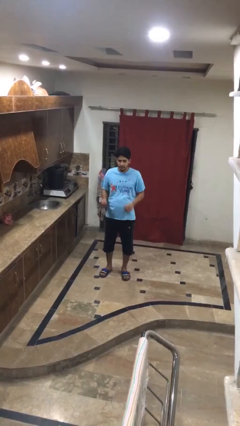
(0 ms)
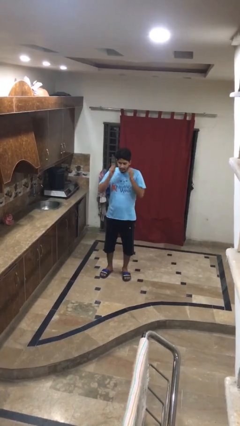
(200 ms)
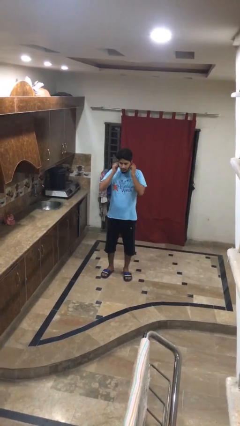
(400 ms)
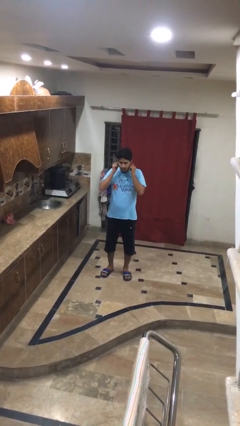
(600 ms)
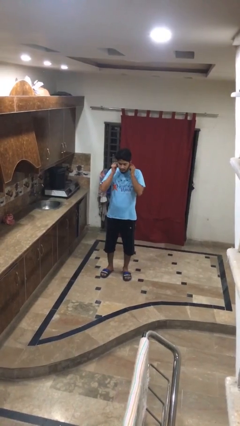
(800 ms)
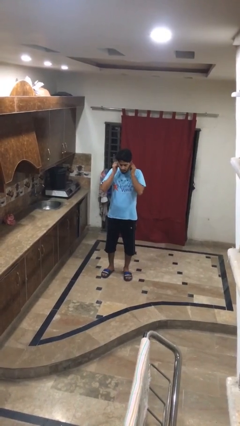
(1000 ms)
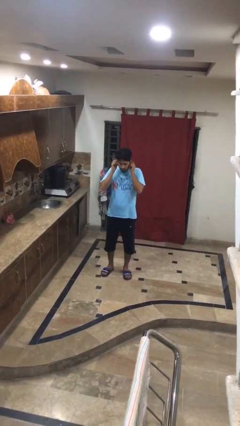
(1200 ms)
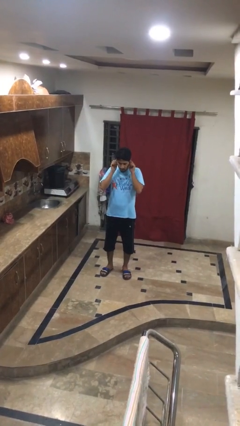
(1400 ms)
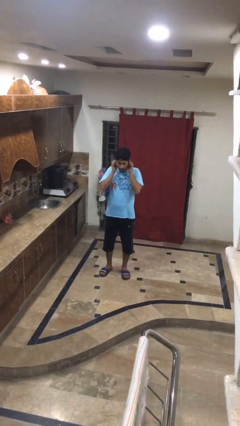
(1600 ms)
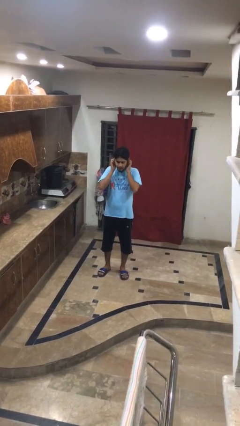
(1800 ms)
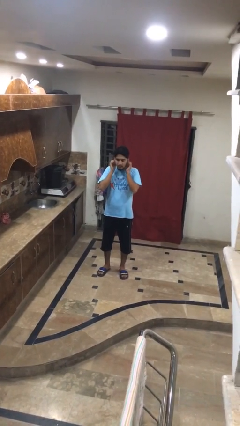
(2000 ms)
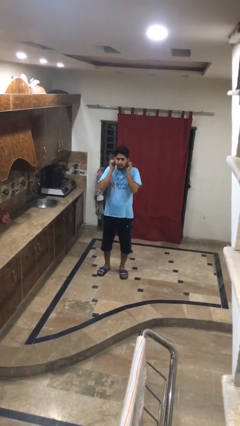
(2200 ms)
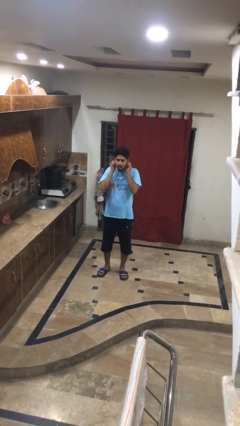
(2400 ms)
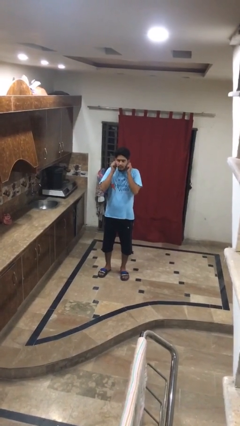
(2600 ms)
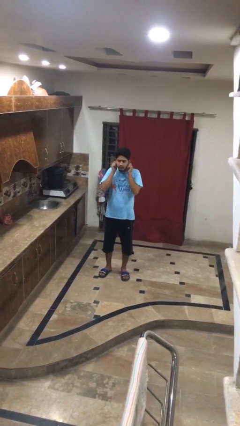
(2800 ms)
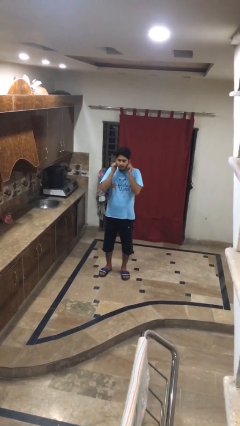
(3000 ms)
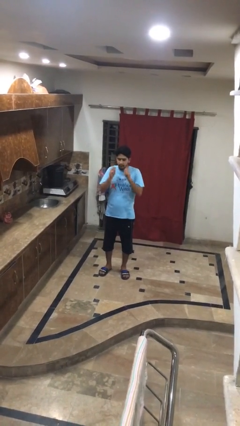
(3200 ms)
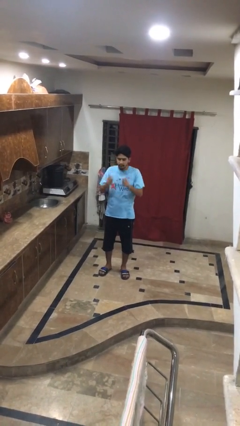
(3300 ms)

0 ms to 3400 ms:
person touches earlobe

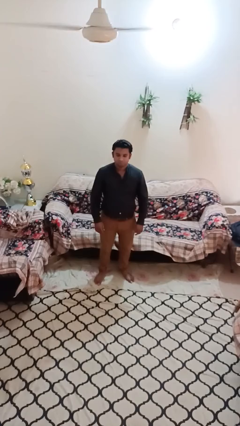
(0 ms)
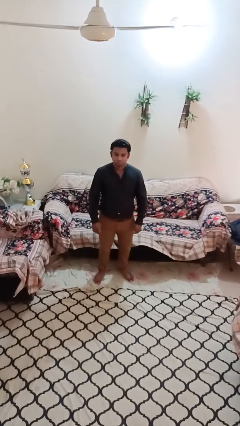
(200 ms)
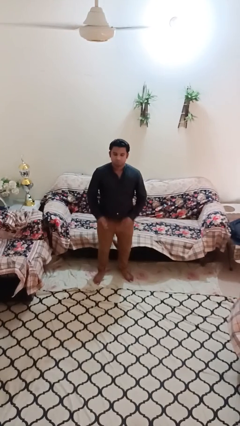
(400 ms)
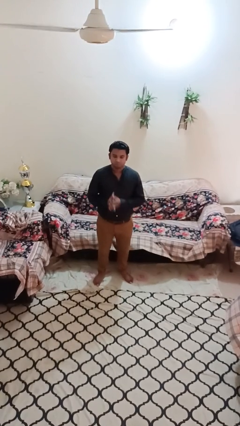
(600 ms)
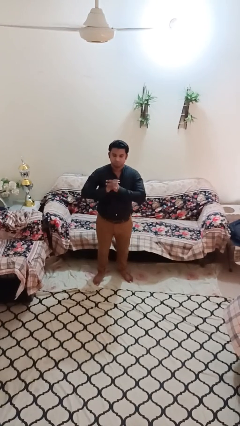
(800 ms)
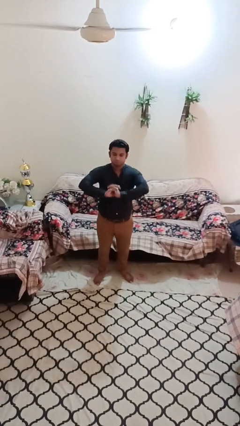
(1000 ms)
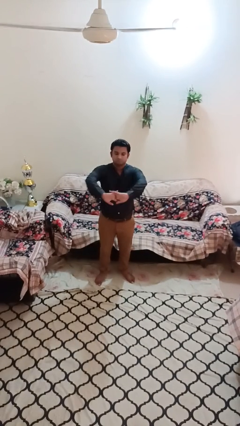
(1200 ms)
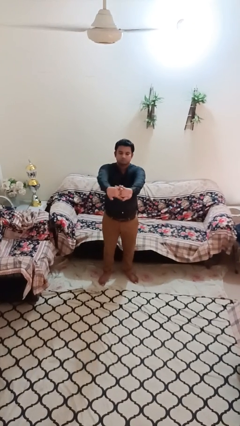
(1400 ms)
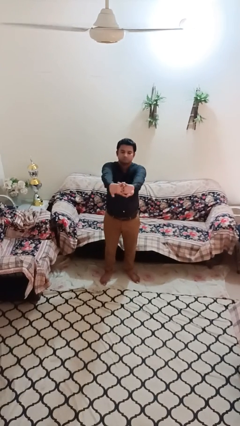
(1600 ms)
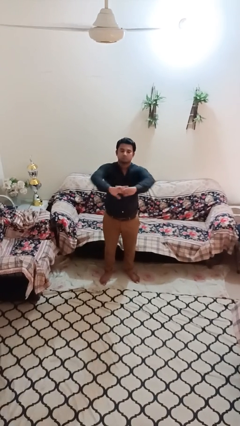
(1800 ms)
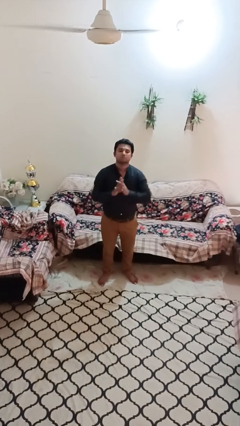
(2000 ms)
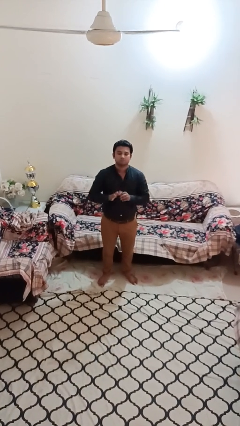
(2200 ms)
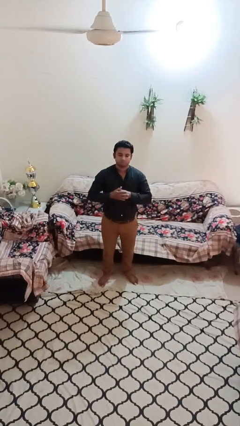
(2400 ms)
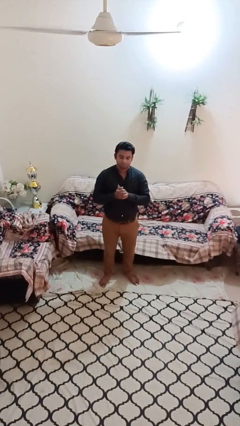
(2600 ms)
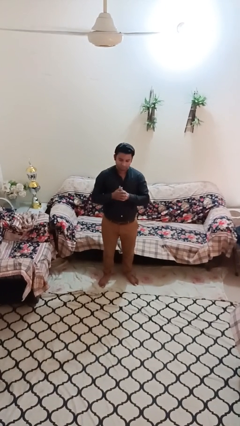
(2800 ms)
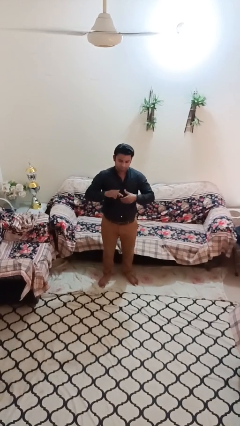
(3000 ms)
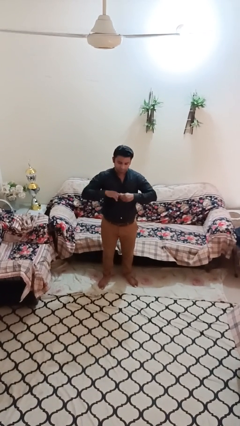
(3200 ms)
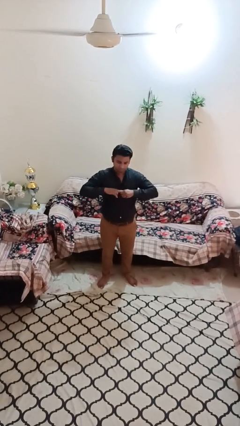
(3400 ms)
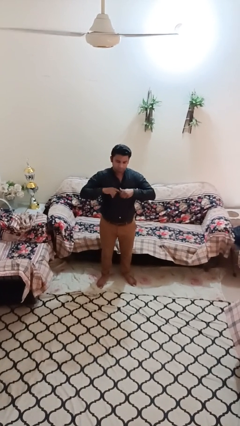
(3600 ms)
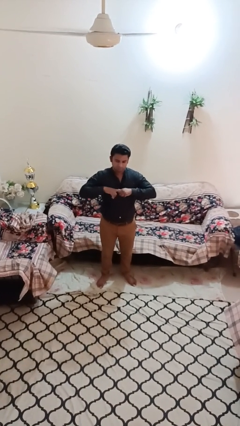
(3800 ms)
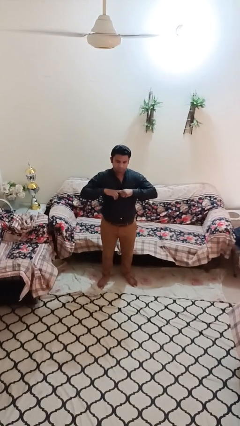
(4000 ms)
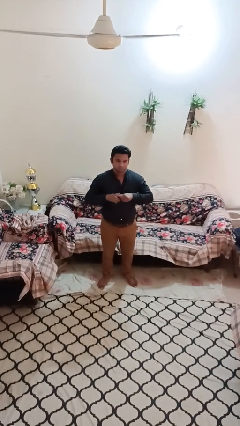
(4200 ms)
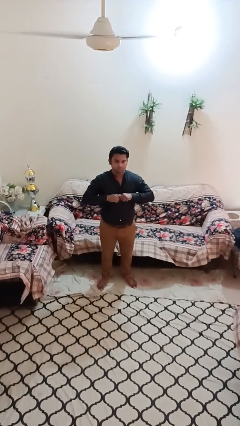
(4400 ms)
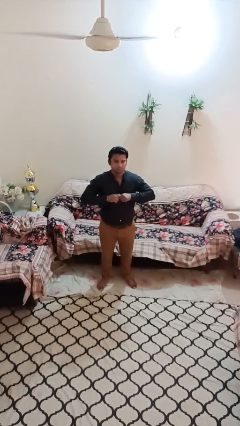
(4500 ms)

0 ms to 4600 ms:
person cracks knuckles

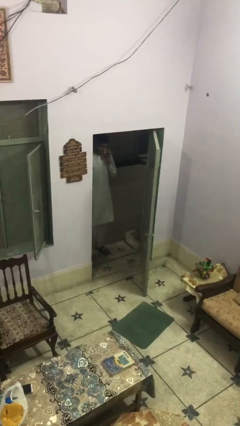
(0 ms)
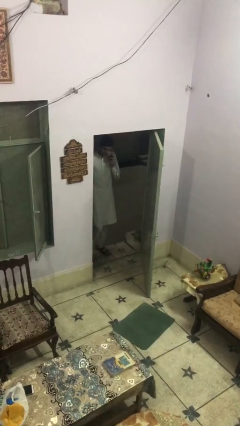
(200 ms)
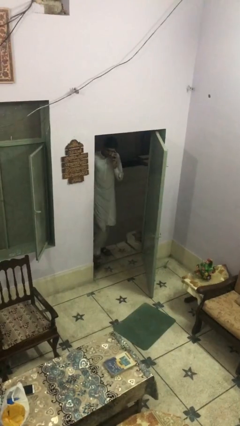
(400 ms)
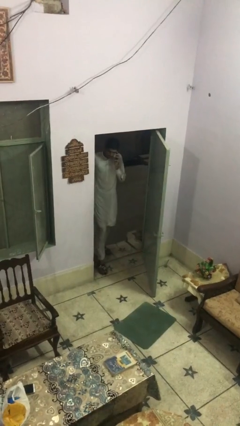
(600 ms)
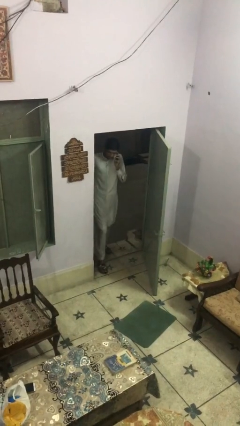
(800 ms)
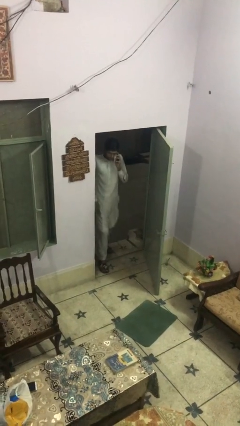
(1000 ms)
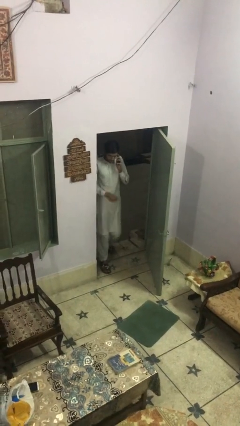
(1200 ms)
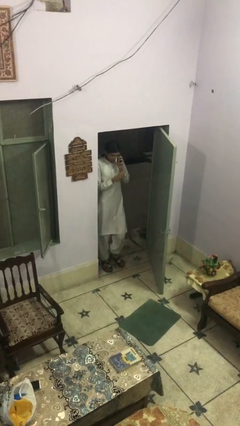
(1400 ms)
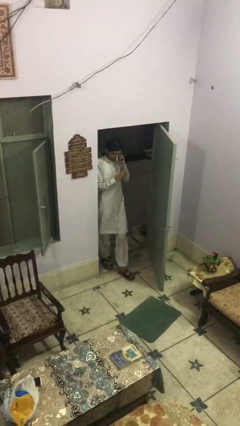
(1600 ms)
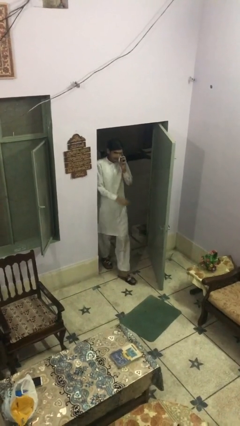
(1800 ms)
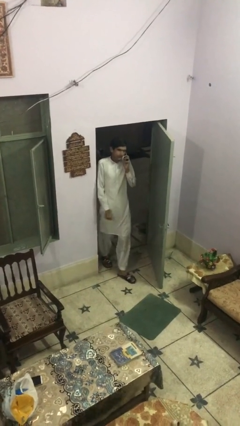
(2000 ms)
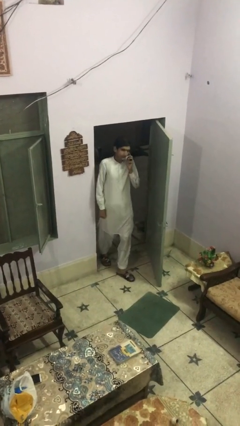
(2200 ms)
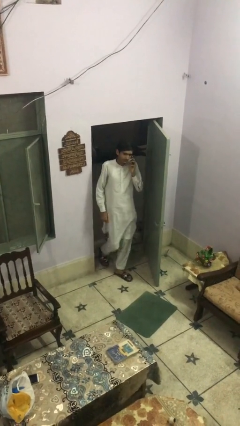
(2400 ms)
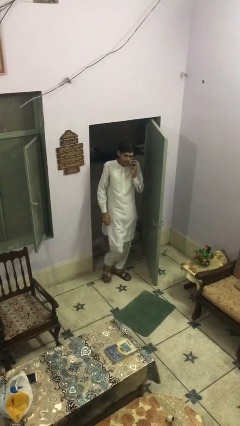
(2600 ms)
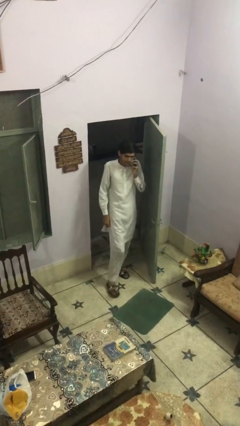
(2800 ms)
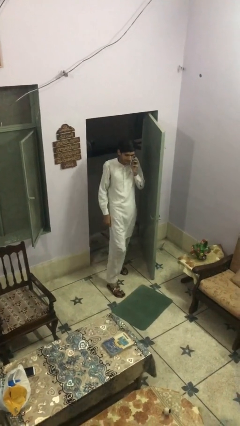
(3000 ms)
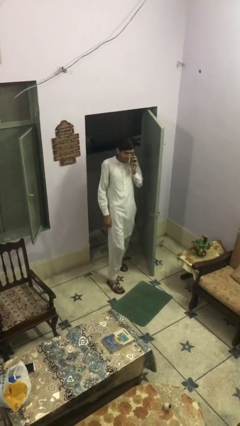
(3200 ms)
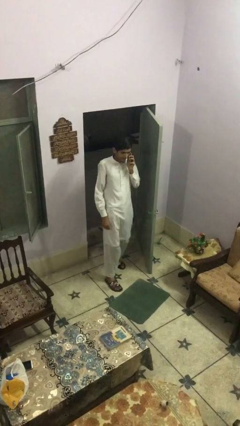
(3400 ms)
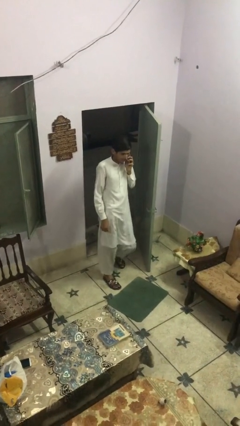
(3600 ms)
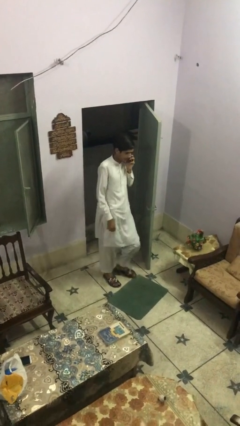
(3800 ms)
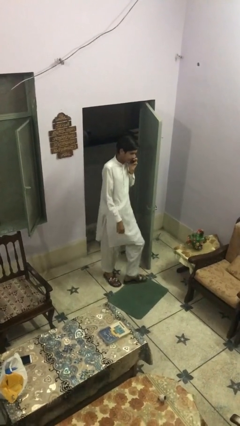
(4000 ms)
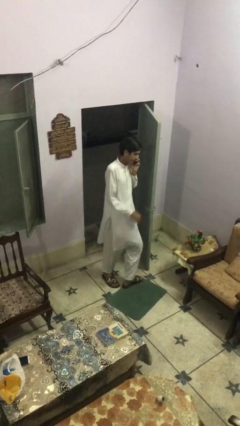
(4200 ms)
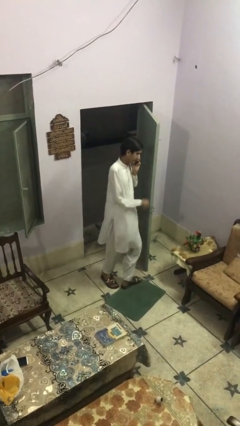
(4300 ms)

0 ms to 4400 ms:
person enters scene through structure

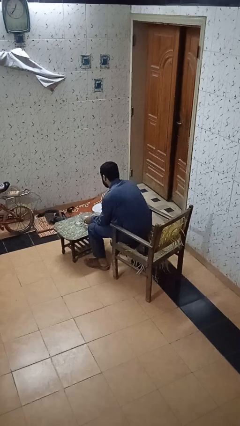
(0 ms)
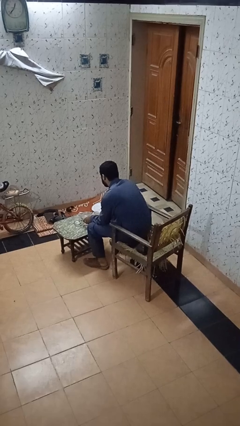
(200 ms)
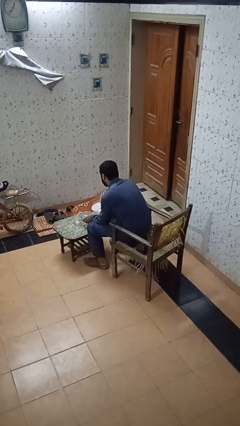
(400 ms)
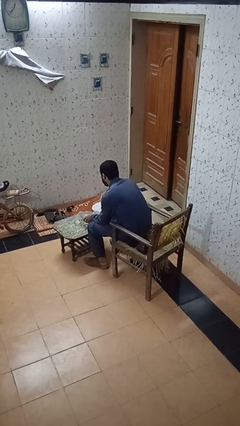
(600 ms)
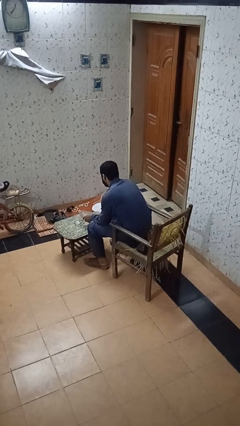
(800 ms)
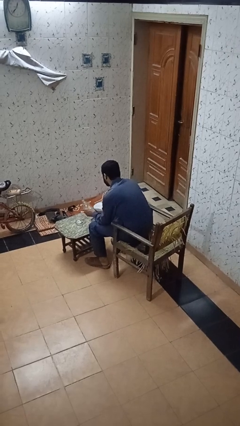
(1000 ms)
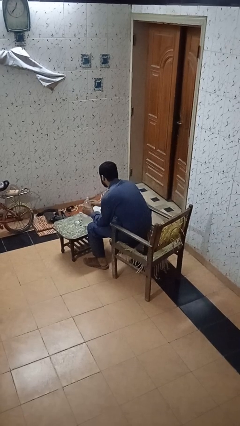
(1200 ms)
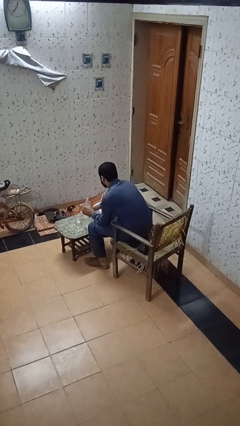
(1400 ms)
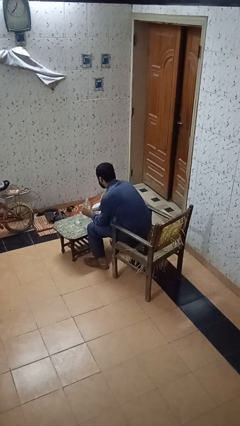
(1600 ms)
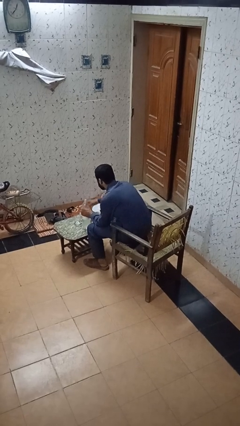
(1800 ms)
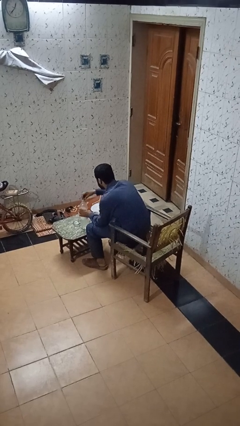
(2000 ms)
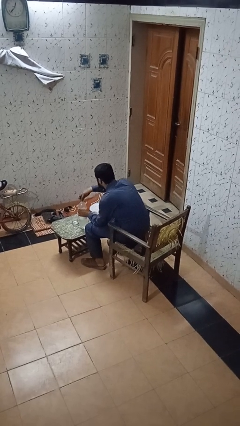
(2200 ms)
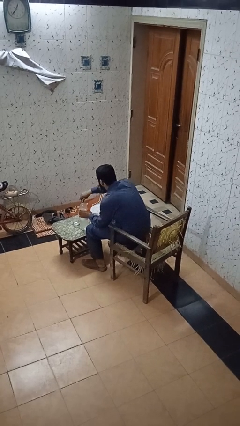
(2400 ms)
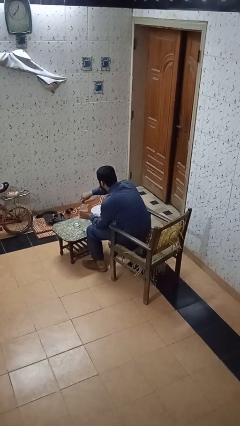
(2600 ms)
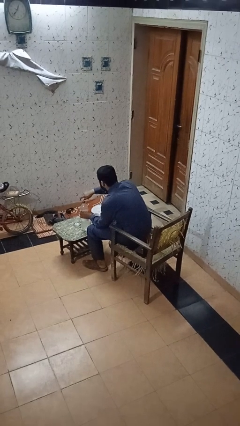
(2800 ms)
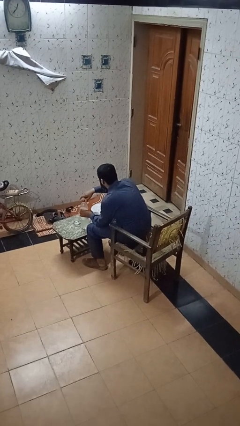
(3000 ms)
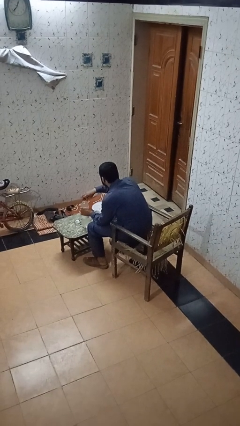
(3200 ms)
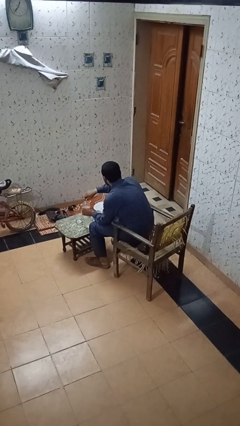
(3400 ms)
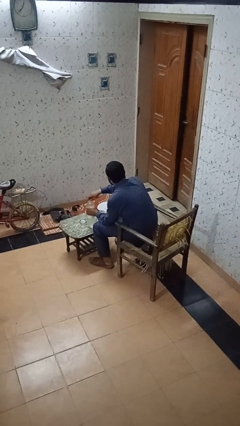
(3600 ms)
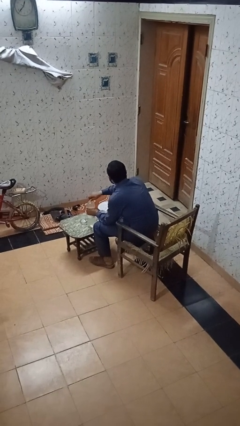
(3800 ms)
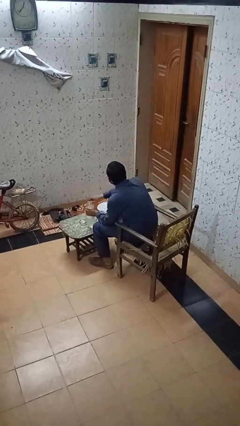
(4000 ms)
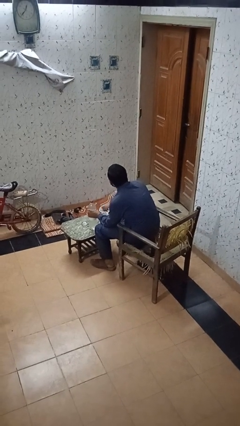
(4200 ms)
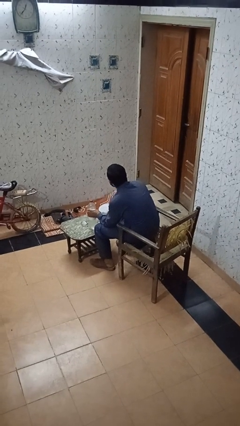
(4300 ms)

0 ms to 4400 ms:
person screws lid to bottle

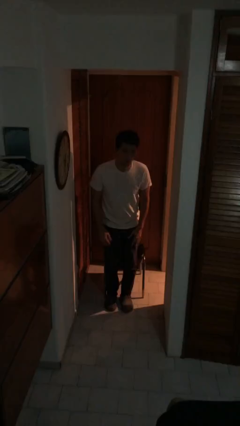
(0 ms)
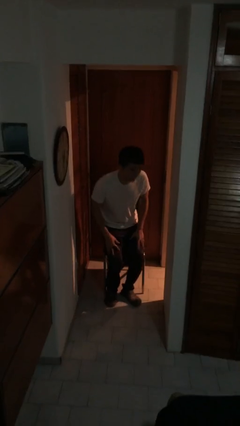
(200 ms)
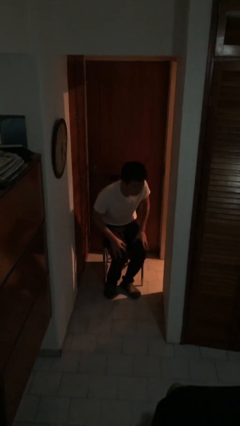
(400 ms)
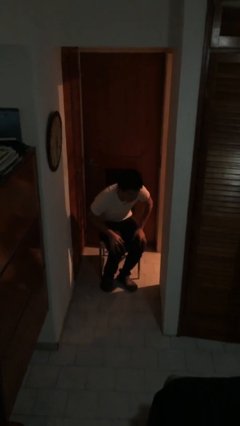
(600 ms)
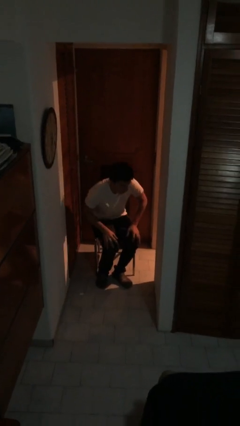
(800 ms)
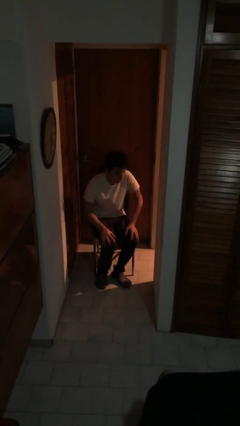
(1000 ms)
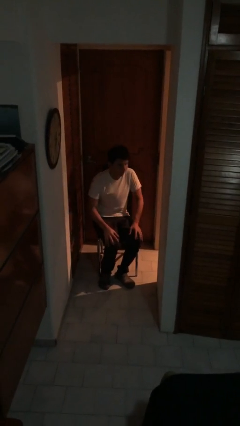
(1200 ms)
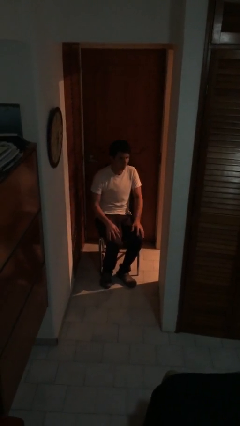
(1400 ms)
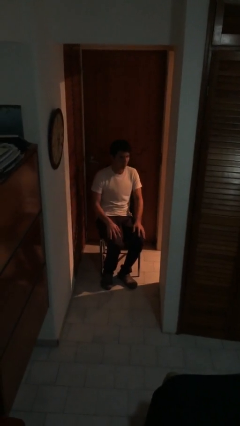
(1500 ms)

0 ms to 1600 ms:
person sits down
